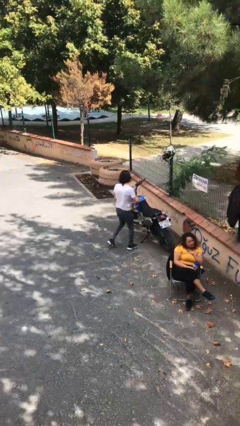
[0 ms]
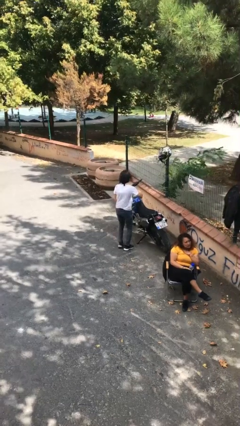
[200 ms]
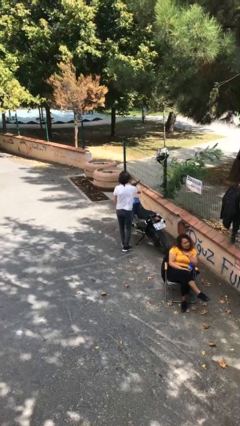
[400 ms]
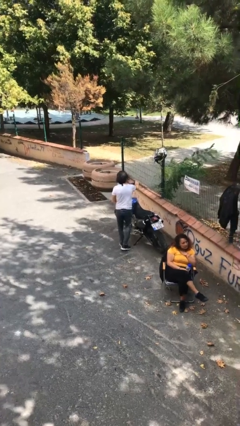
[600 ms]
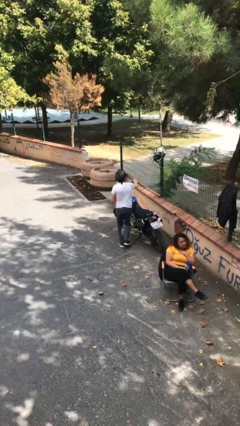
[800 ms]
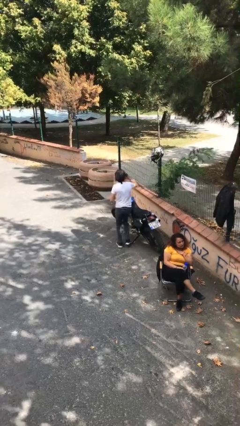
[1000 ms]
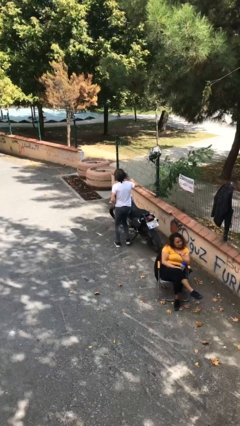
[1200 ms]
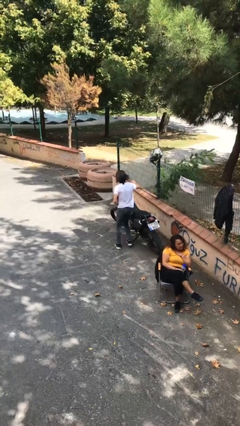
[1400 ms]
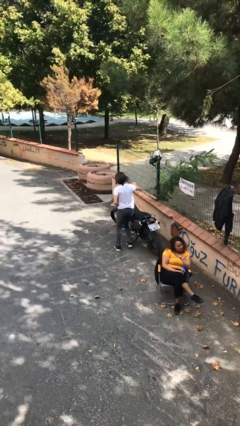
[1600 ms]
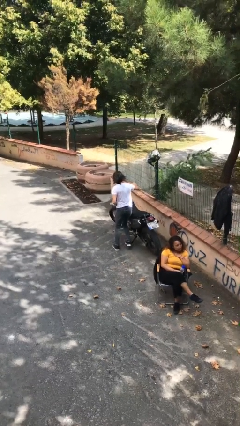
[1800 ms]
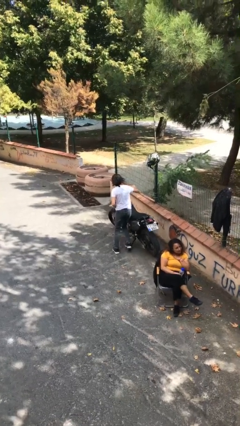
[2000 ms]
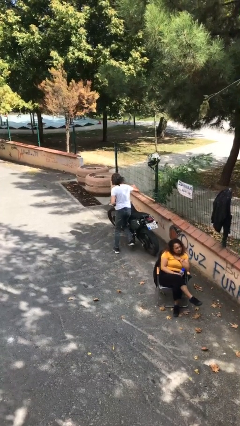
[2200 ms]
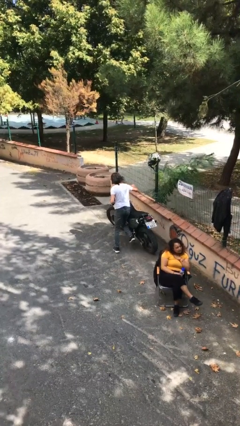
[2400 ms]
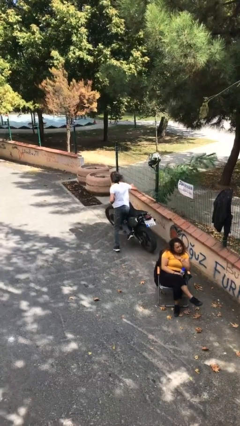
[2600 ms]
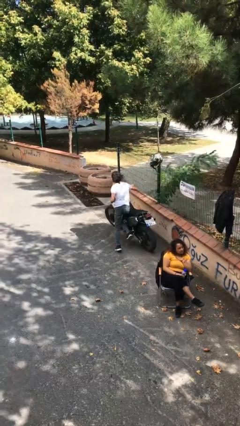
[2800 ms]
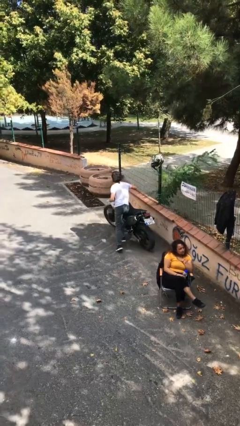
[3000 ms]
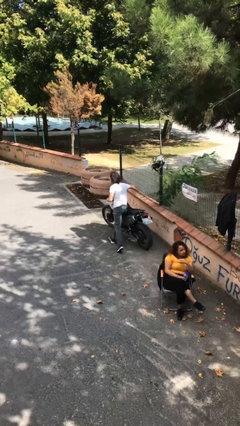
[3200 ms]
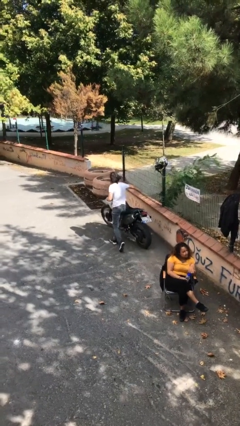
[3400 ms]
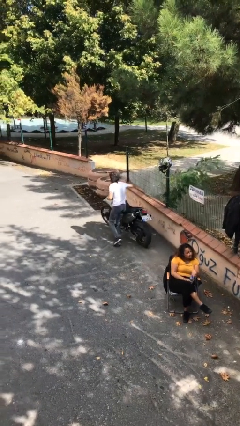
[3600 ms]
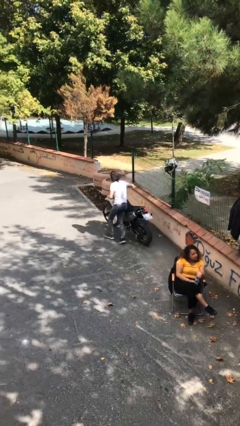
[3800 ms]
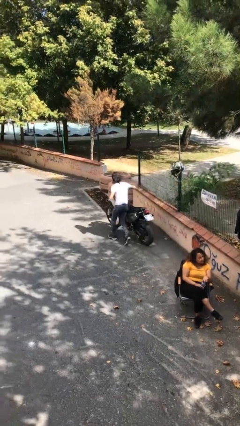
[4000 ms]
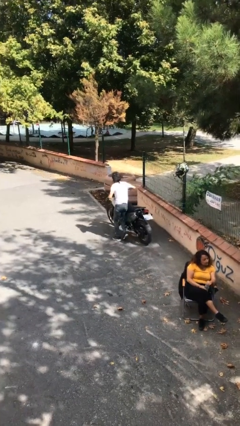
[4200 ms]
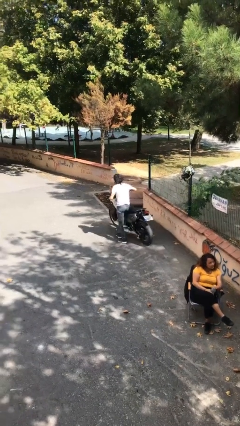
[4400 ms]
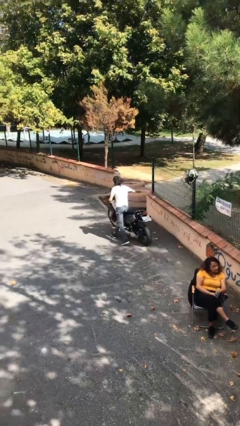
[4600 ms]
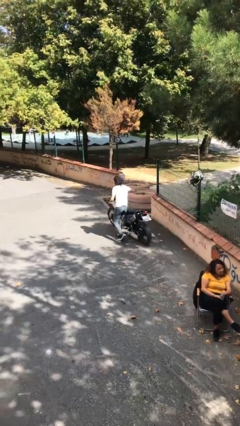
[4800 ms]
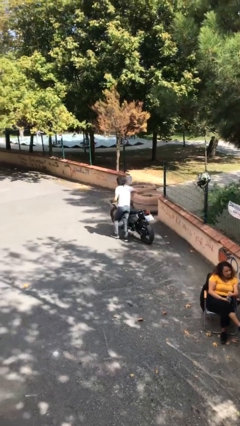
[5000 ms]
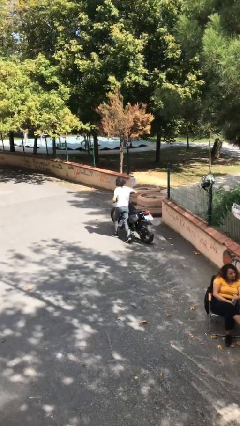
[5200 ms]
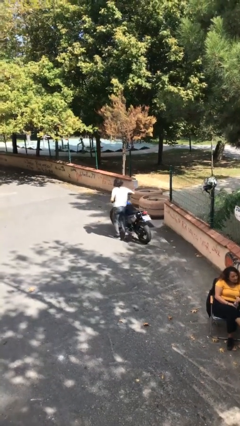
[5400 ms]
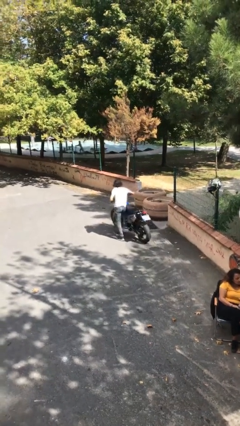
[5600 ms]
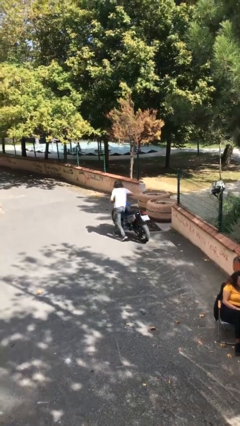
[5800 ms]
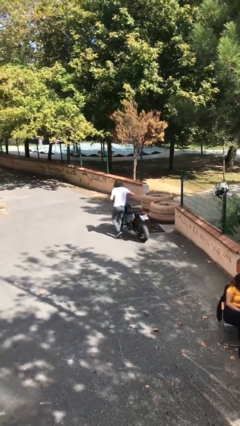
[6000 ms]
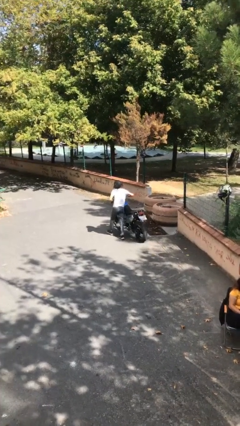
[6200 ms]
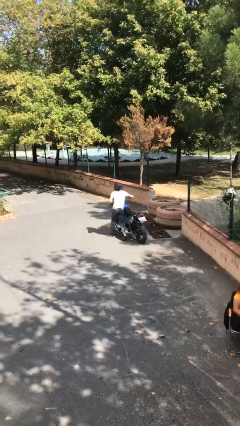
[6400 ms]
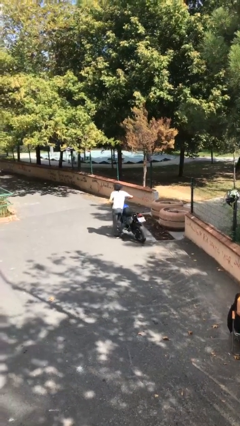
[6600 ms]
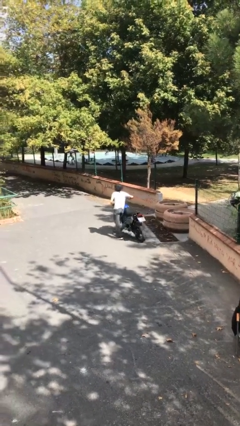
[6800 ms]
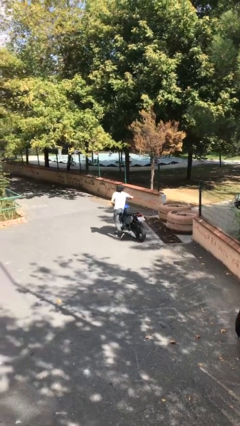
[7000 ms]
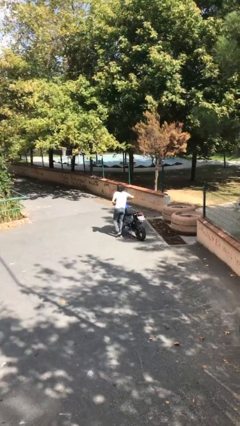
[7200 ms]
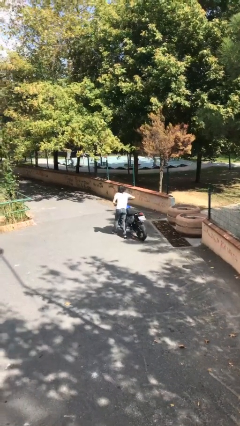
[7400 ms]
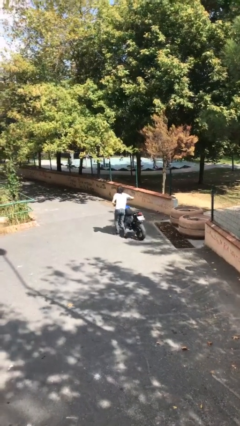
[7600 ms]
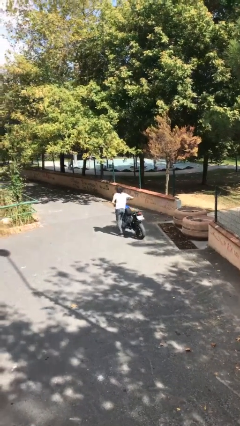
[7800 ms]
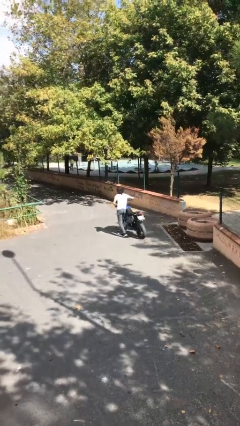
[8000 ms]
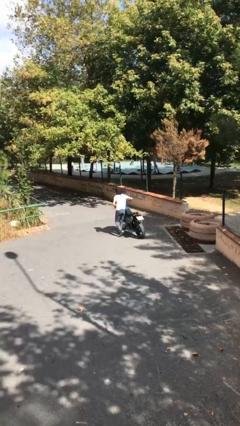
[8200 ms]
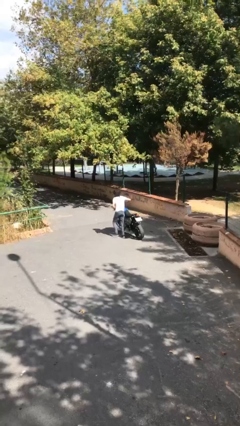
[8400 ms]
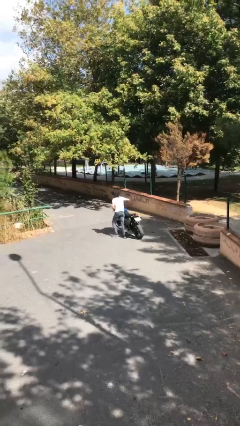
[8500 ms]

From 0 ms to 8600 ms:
person steals object from person

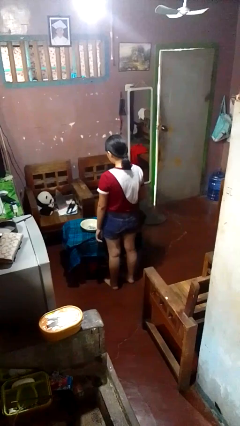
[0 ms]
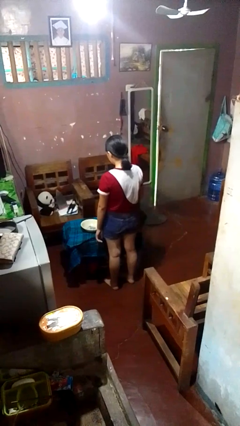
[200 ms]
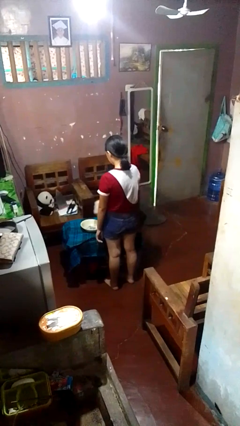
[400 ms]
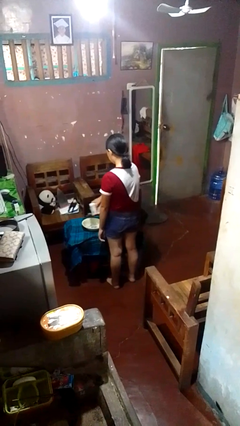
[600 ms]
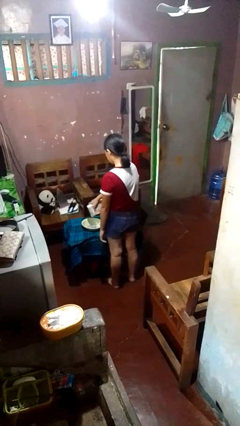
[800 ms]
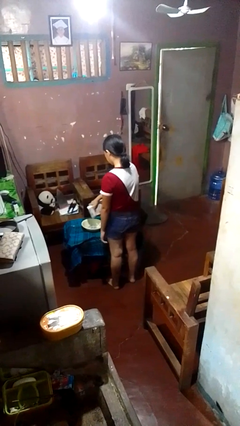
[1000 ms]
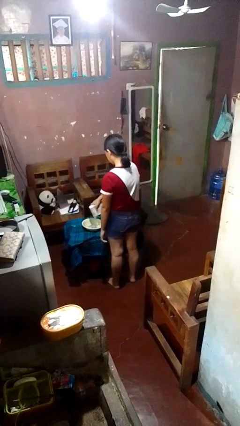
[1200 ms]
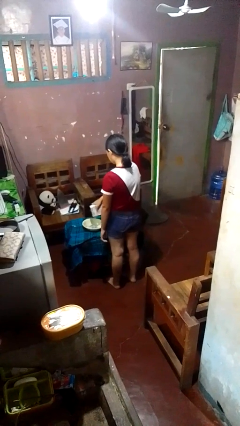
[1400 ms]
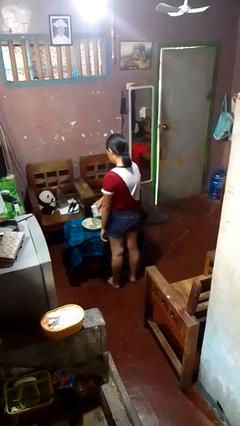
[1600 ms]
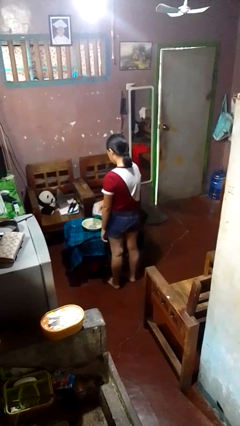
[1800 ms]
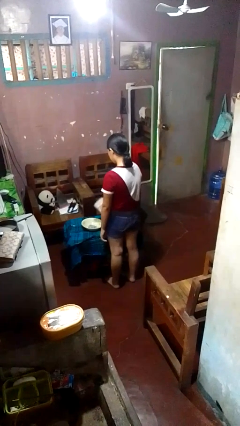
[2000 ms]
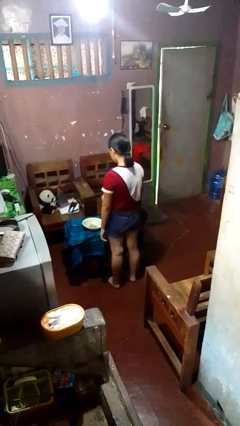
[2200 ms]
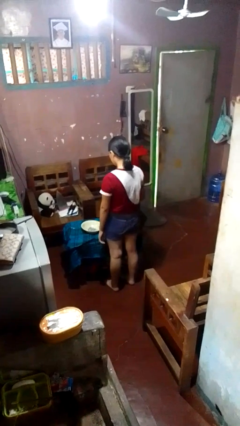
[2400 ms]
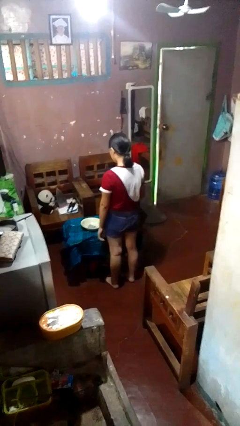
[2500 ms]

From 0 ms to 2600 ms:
person pours into bowl

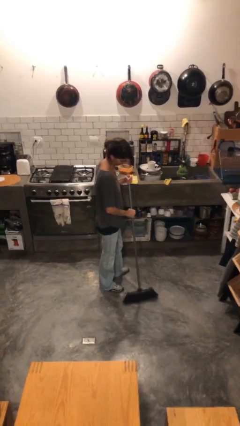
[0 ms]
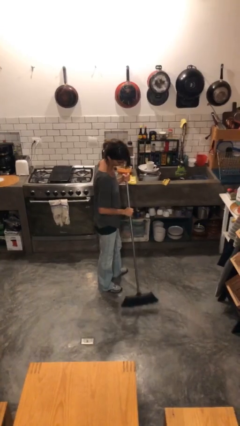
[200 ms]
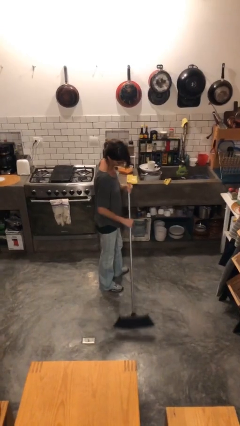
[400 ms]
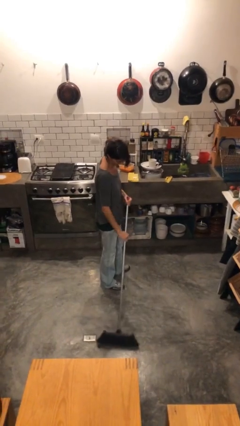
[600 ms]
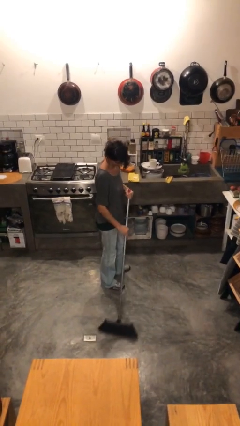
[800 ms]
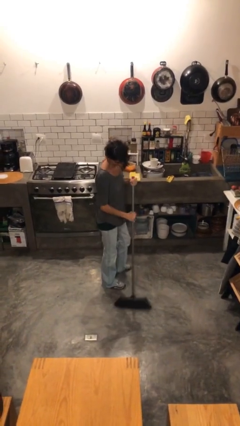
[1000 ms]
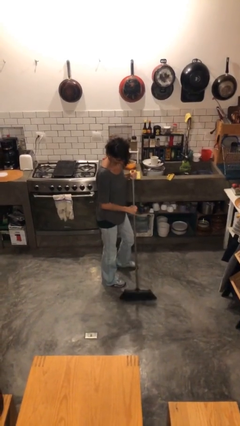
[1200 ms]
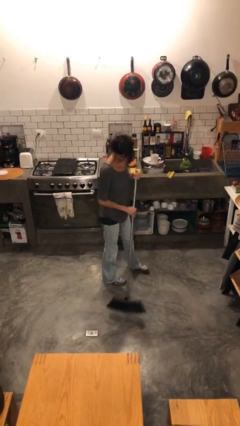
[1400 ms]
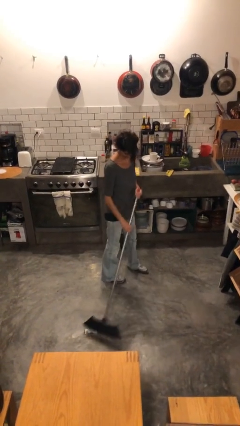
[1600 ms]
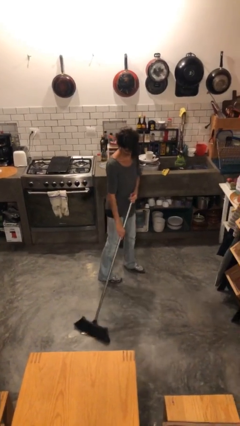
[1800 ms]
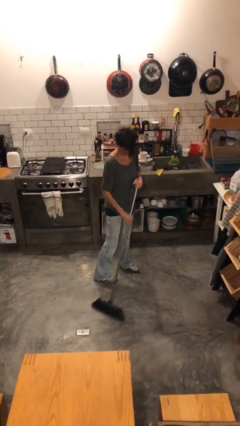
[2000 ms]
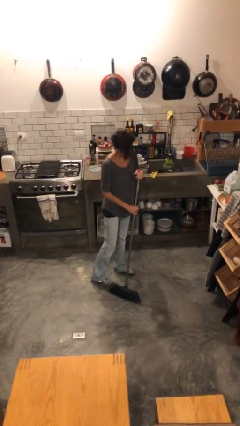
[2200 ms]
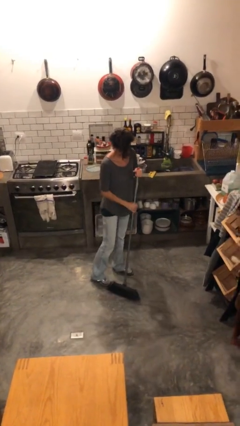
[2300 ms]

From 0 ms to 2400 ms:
person sweeps floor

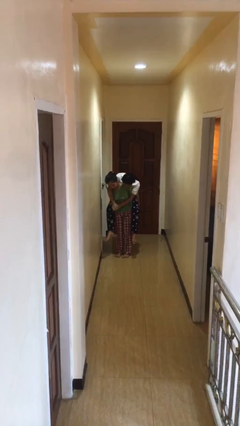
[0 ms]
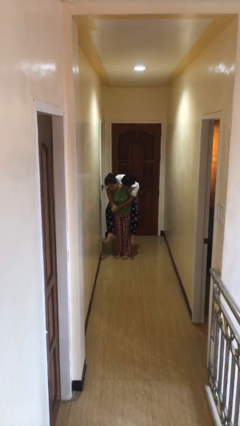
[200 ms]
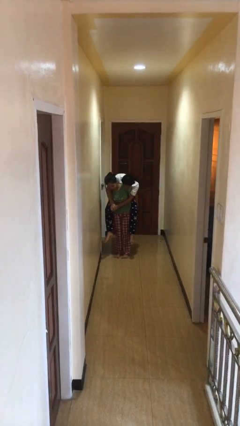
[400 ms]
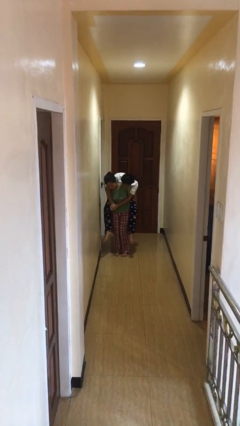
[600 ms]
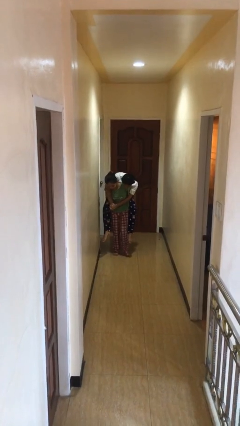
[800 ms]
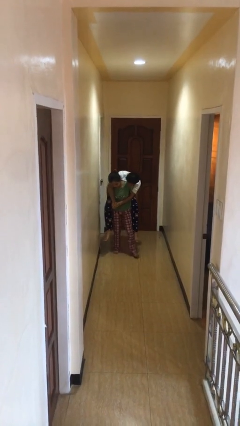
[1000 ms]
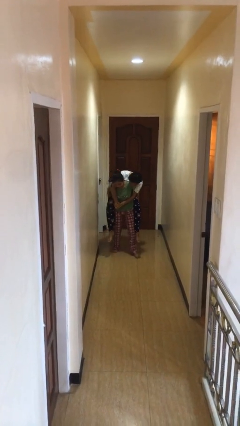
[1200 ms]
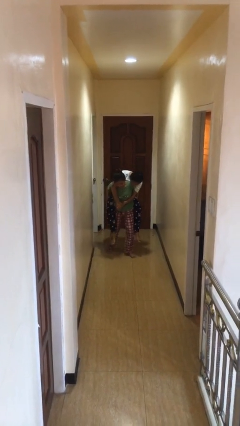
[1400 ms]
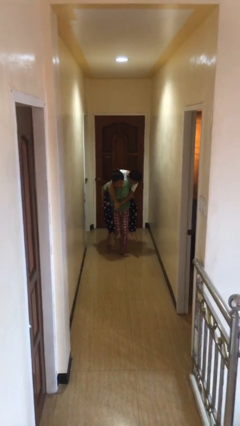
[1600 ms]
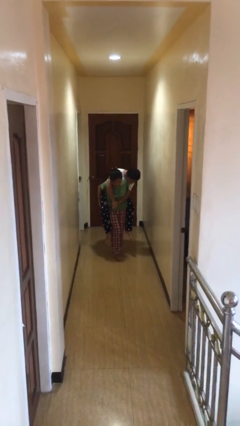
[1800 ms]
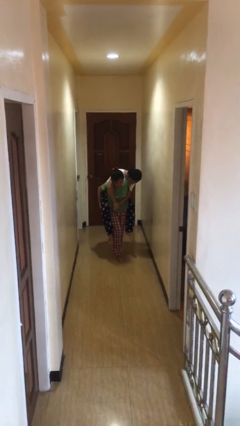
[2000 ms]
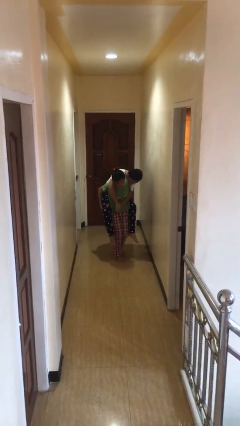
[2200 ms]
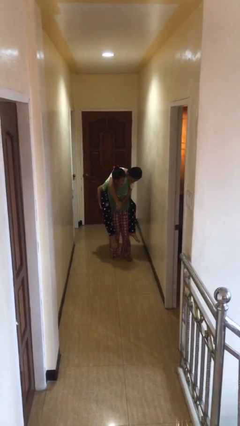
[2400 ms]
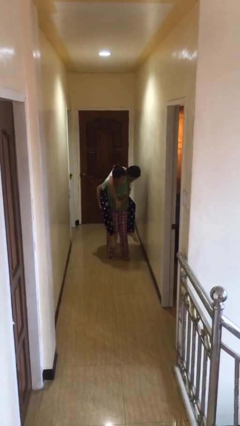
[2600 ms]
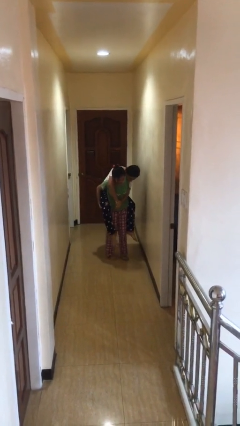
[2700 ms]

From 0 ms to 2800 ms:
person carries person on back

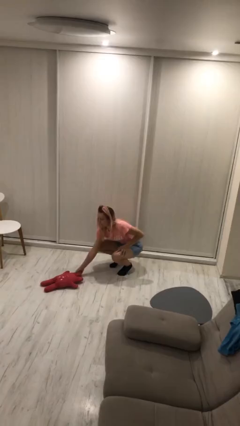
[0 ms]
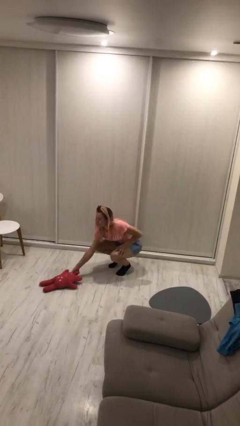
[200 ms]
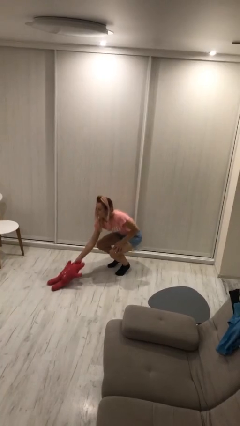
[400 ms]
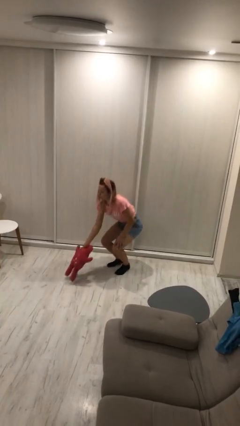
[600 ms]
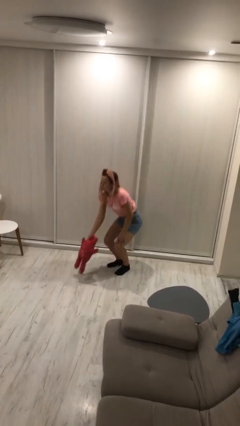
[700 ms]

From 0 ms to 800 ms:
person picks up object from floor

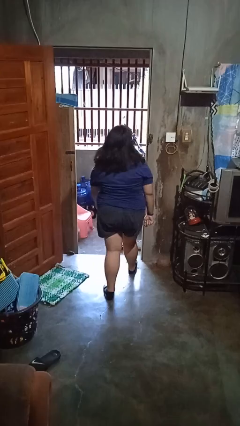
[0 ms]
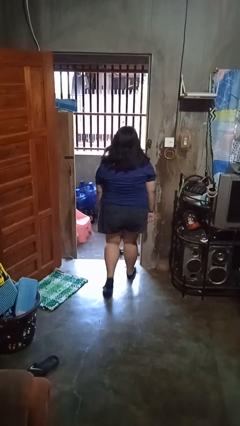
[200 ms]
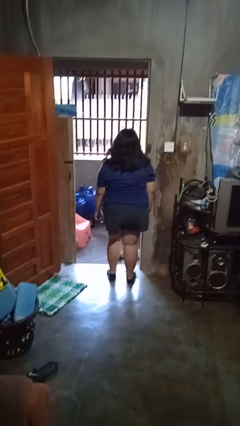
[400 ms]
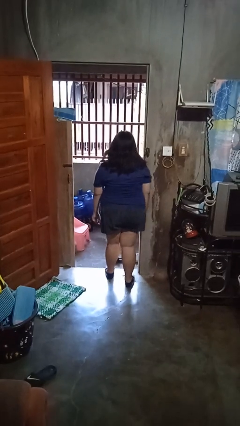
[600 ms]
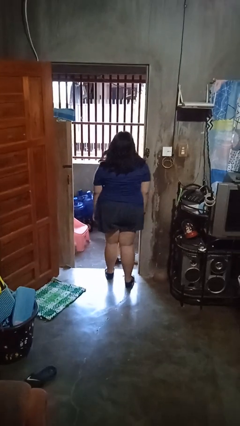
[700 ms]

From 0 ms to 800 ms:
person bumps into wall
